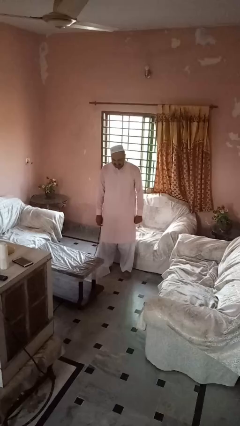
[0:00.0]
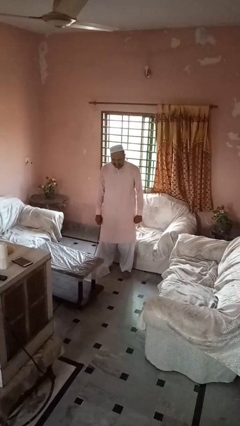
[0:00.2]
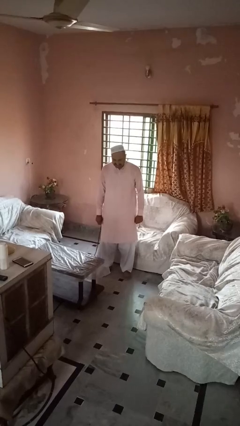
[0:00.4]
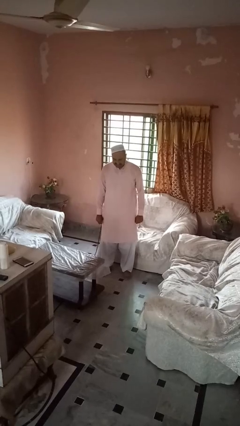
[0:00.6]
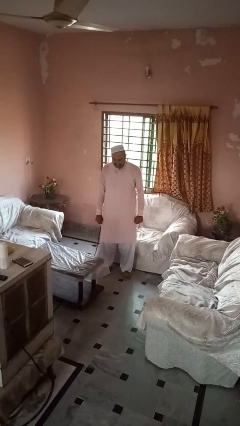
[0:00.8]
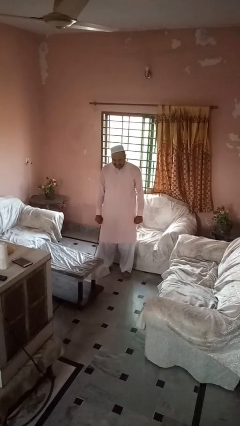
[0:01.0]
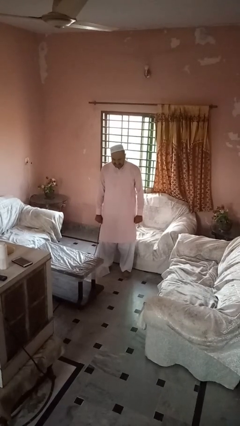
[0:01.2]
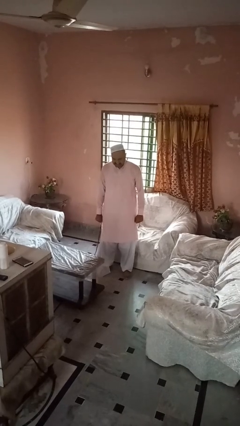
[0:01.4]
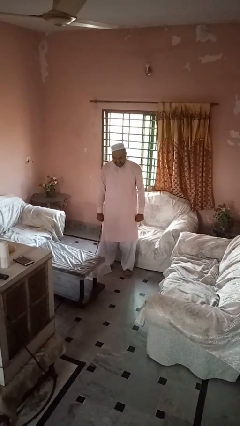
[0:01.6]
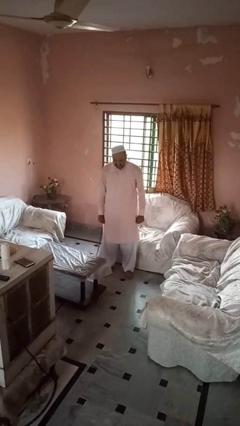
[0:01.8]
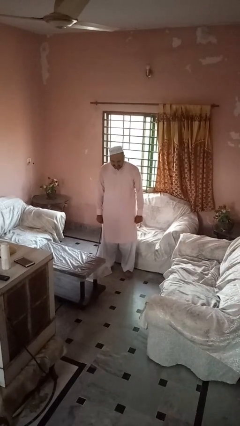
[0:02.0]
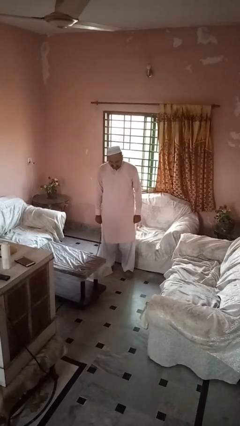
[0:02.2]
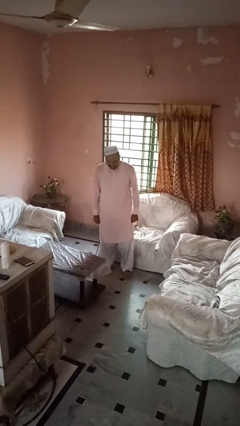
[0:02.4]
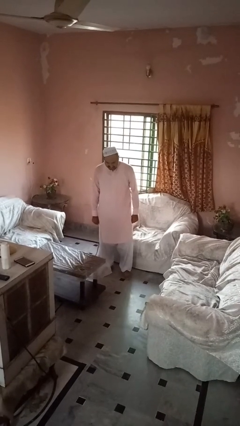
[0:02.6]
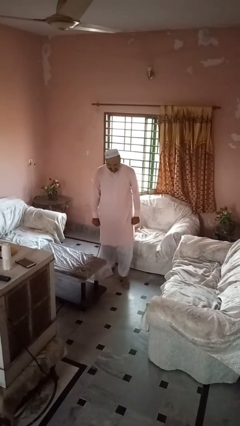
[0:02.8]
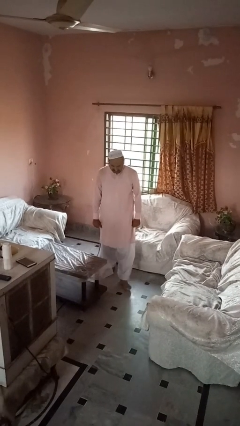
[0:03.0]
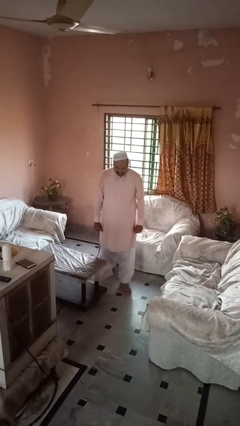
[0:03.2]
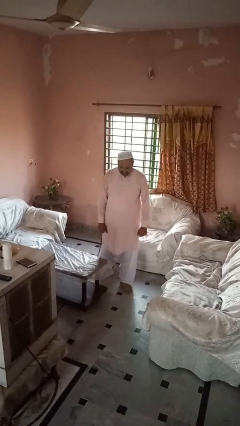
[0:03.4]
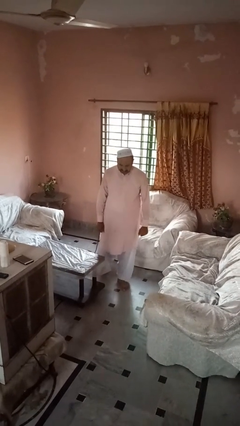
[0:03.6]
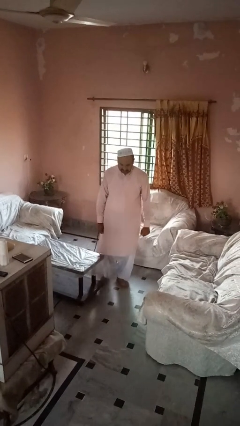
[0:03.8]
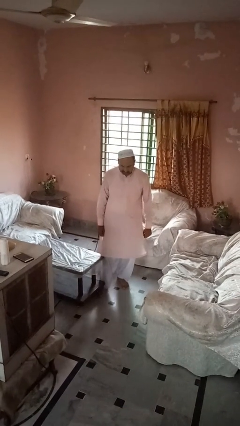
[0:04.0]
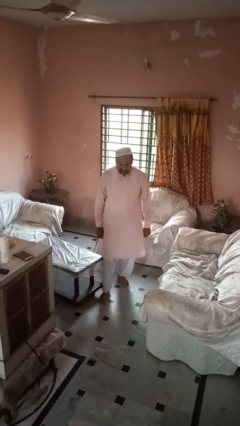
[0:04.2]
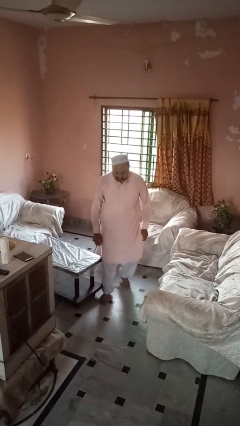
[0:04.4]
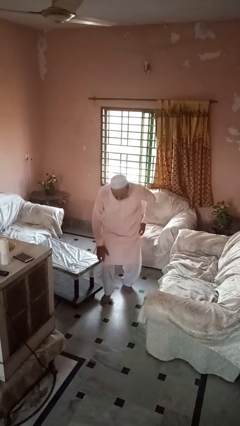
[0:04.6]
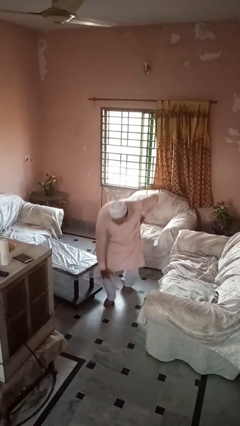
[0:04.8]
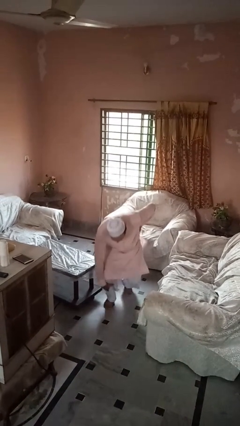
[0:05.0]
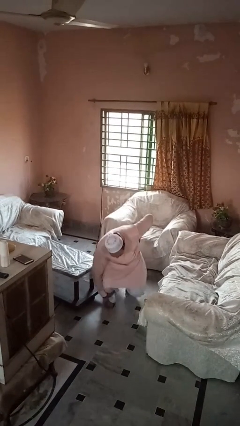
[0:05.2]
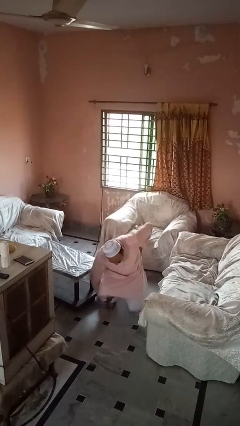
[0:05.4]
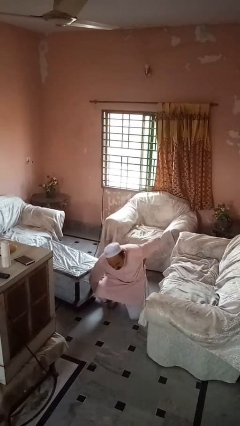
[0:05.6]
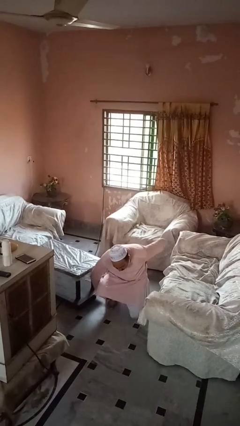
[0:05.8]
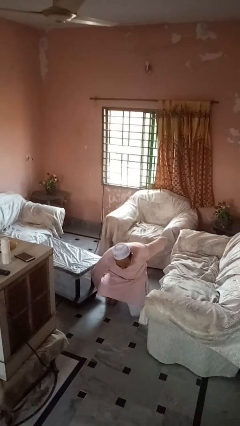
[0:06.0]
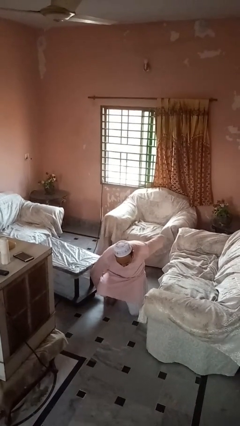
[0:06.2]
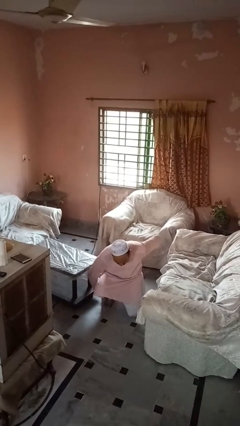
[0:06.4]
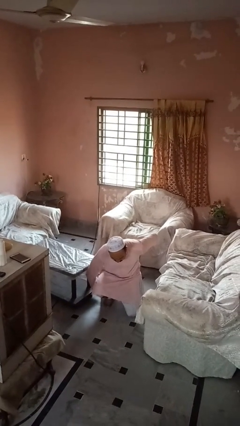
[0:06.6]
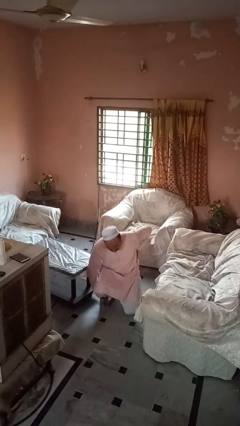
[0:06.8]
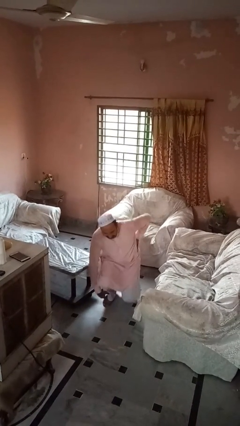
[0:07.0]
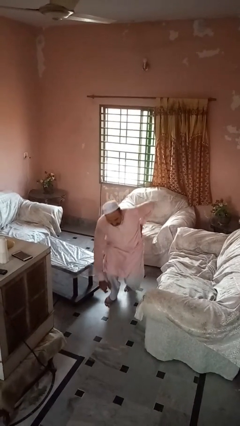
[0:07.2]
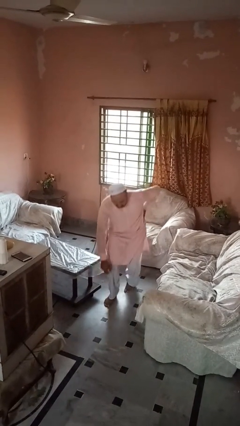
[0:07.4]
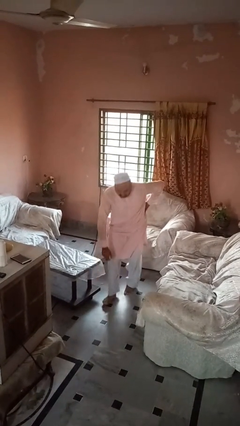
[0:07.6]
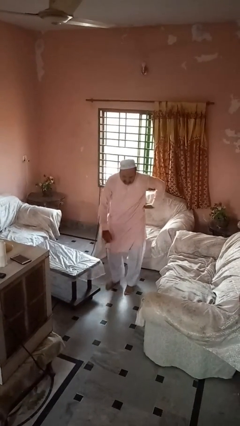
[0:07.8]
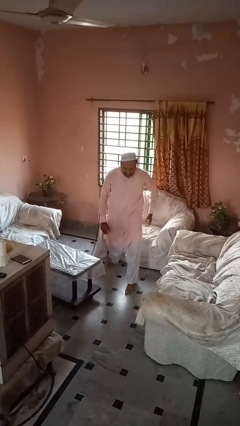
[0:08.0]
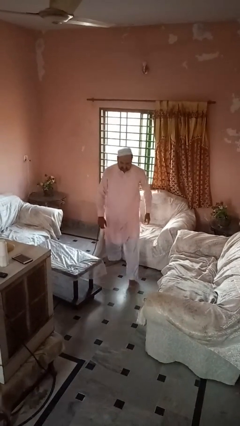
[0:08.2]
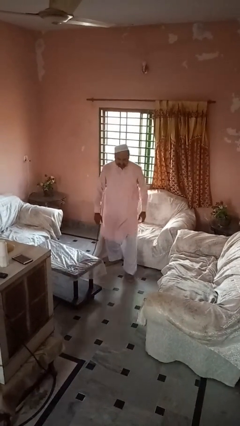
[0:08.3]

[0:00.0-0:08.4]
person bumps into table

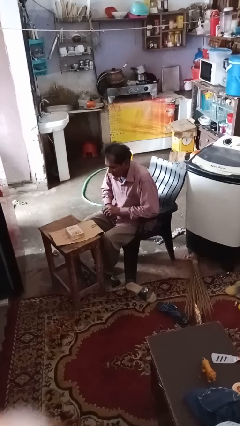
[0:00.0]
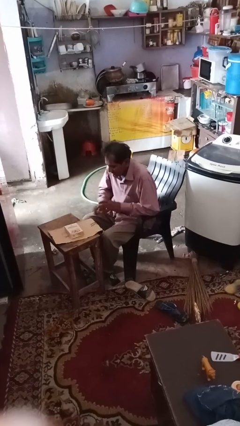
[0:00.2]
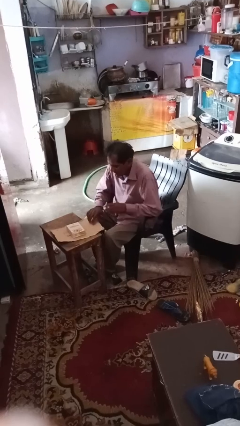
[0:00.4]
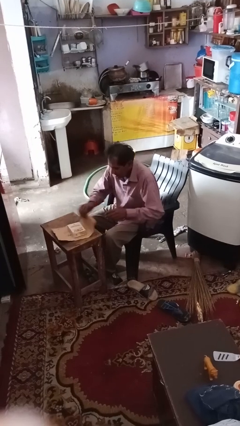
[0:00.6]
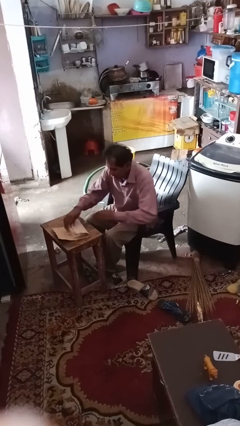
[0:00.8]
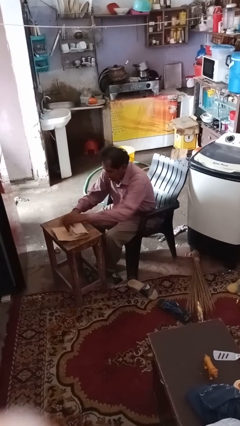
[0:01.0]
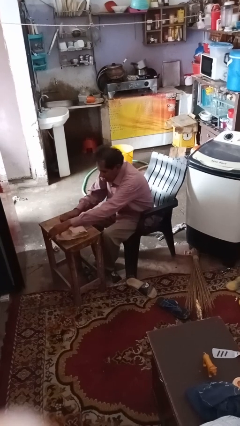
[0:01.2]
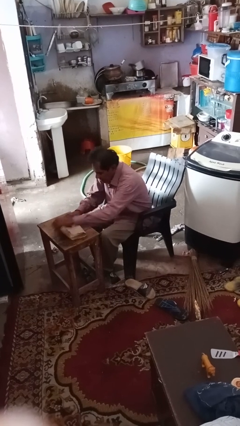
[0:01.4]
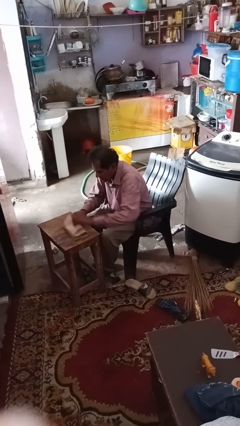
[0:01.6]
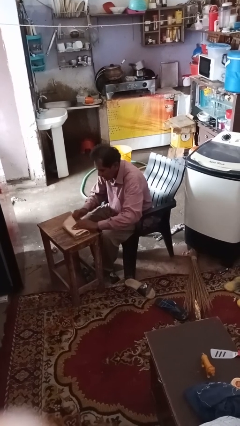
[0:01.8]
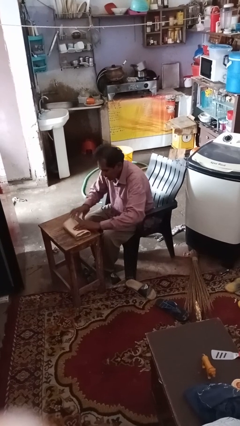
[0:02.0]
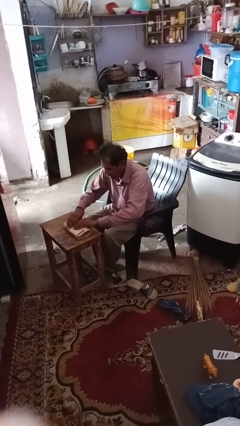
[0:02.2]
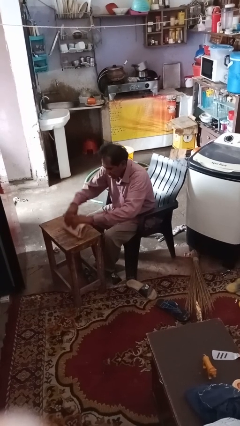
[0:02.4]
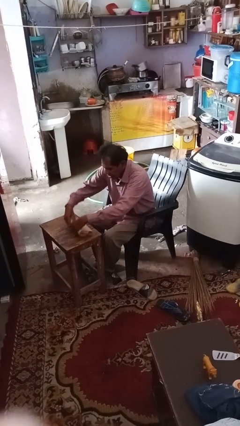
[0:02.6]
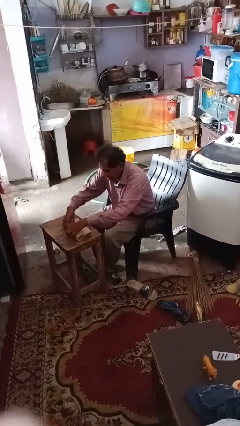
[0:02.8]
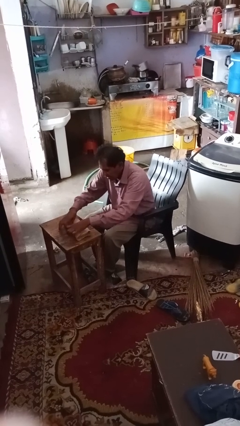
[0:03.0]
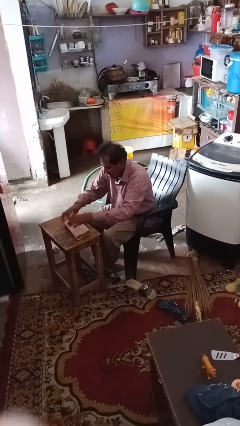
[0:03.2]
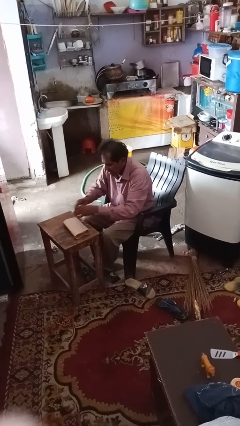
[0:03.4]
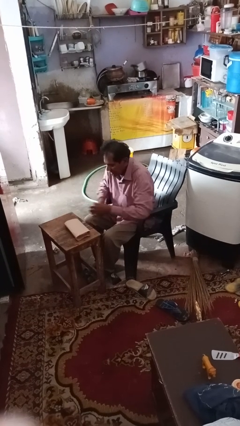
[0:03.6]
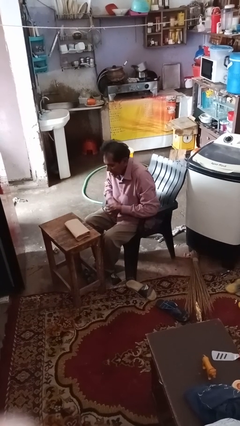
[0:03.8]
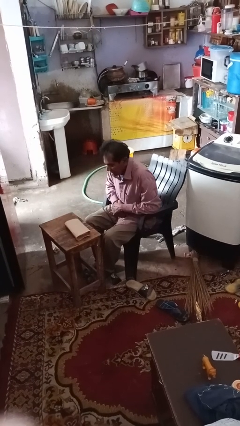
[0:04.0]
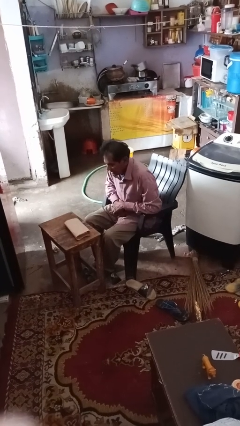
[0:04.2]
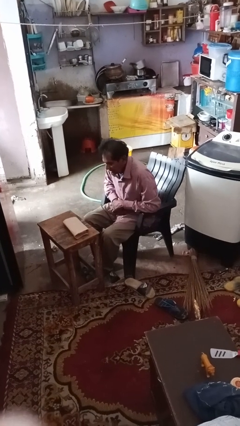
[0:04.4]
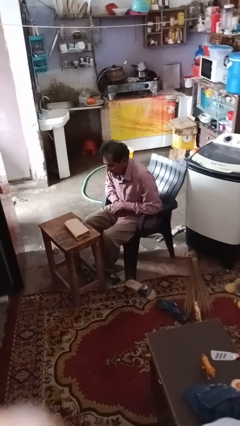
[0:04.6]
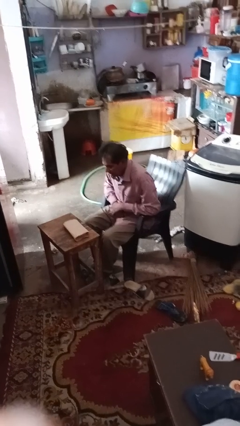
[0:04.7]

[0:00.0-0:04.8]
person wraps box

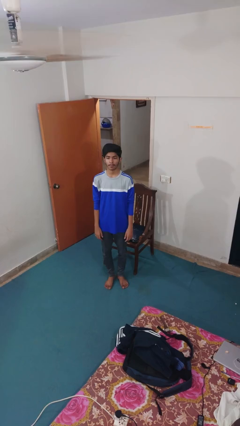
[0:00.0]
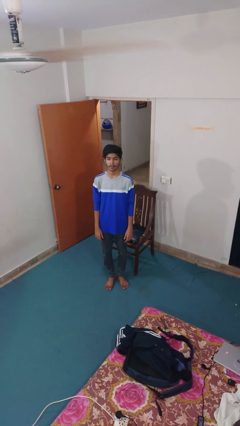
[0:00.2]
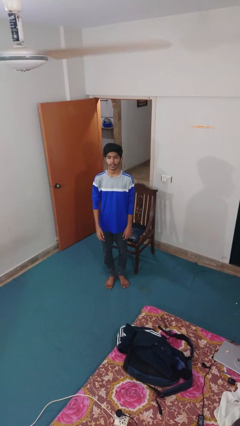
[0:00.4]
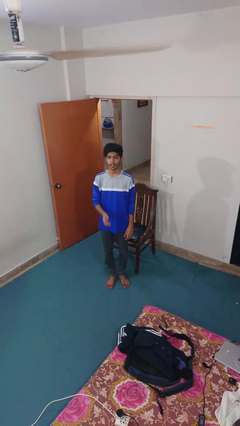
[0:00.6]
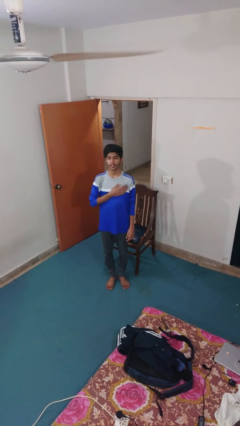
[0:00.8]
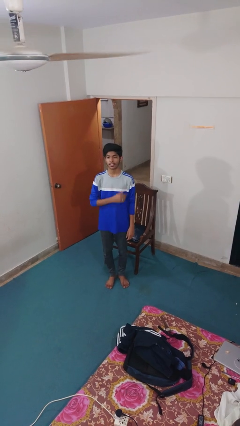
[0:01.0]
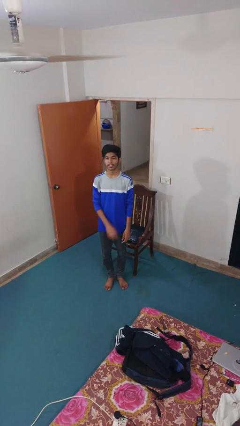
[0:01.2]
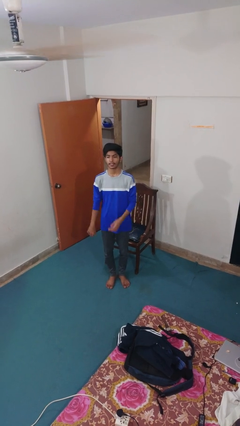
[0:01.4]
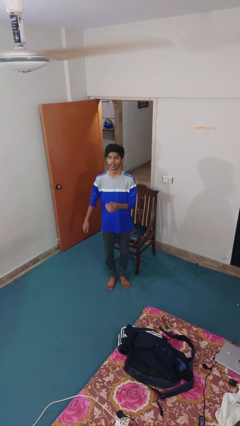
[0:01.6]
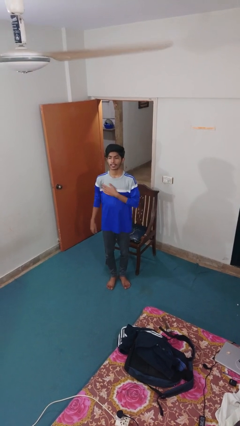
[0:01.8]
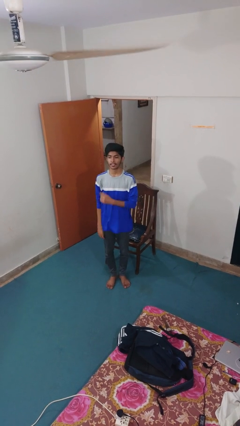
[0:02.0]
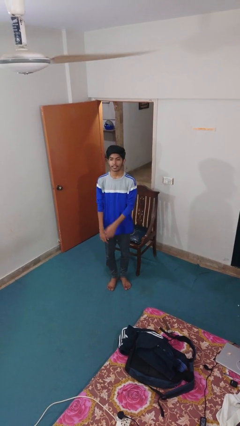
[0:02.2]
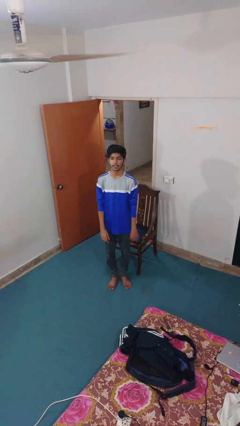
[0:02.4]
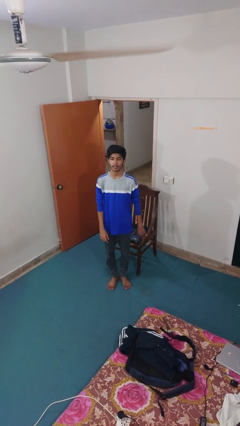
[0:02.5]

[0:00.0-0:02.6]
person drums on chest

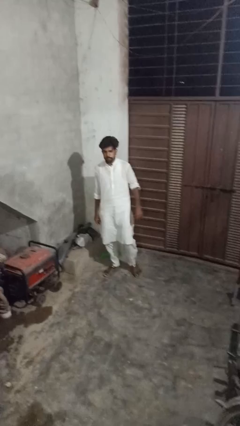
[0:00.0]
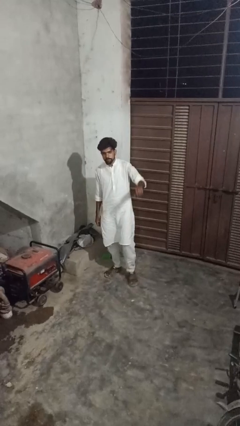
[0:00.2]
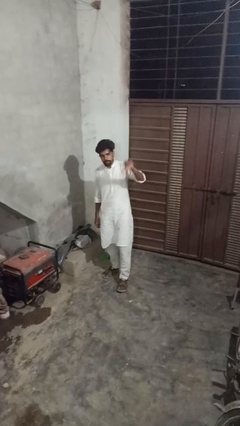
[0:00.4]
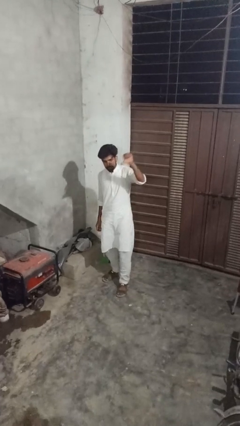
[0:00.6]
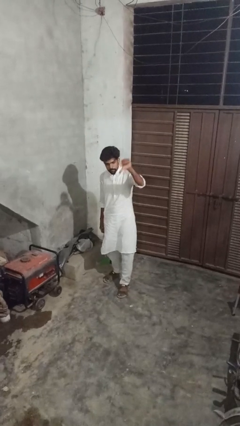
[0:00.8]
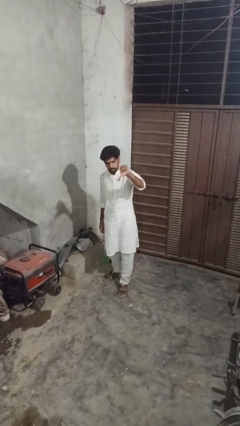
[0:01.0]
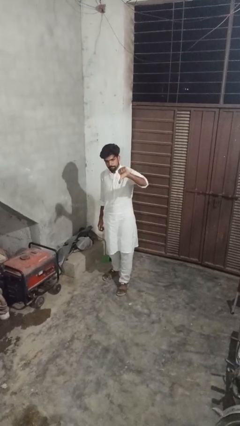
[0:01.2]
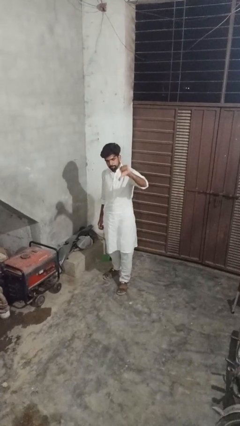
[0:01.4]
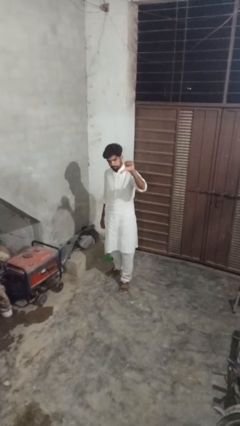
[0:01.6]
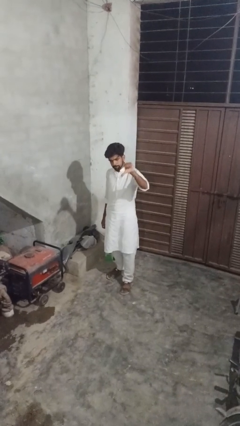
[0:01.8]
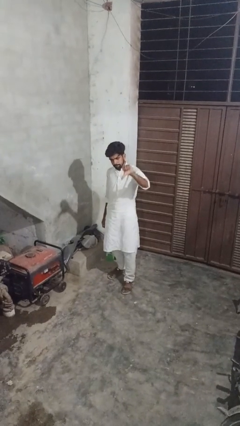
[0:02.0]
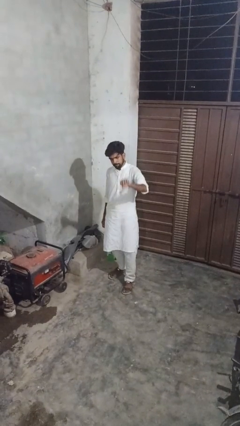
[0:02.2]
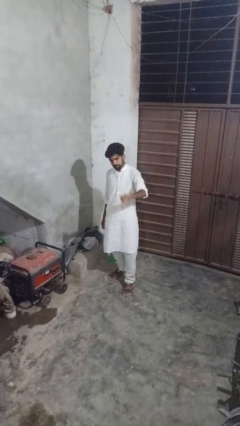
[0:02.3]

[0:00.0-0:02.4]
person gestures thumbs down
